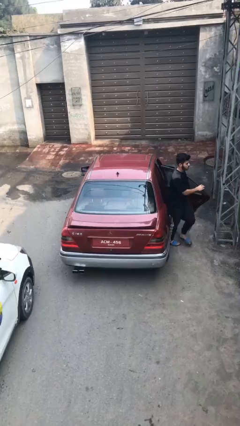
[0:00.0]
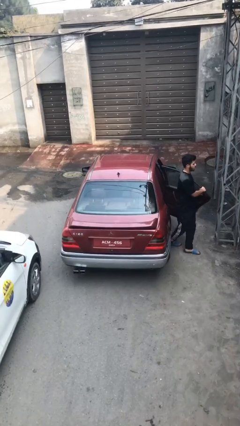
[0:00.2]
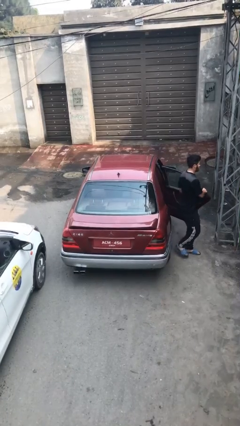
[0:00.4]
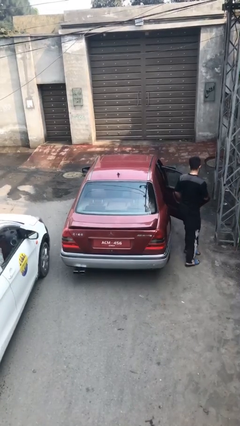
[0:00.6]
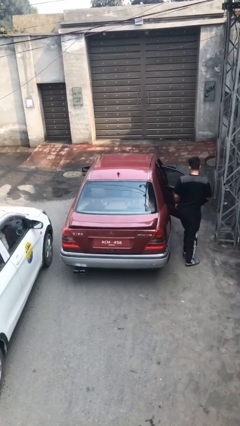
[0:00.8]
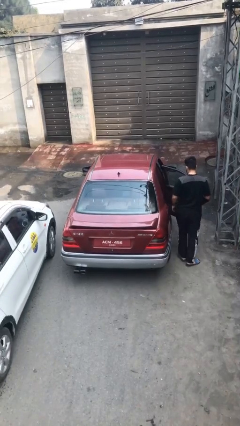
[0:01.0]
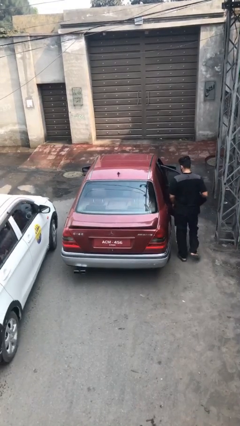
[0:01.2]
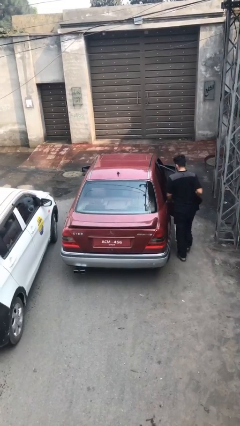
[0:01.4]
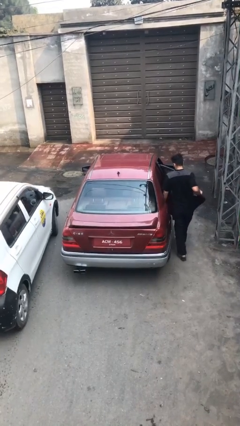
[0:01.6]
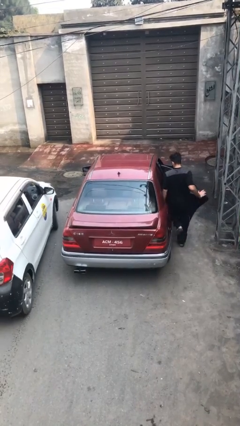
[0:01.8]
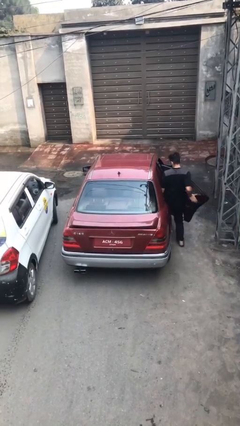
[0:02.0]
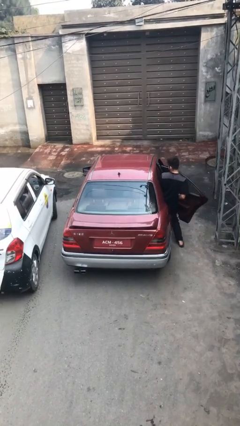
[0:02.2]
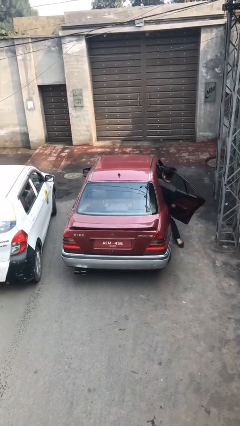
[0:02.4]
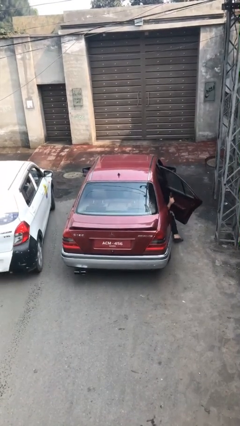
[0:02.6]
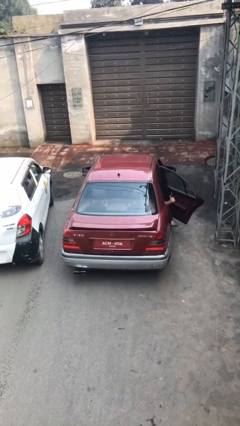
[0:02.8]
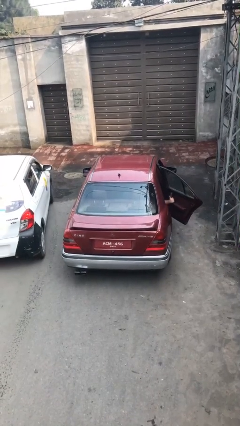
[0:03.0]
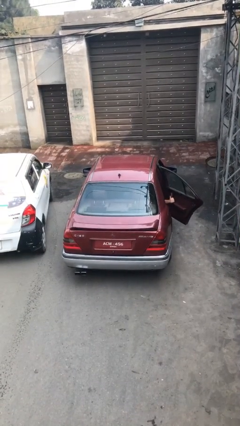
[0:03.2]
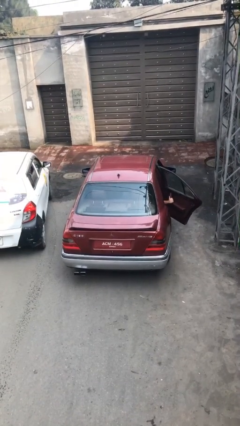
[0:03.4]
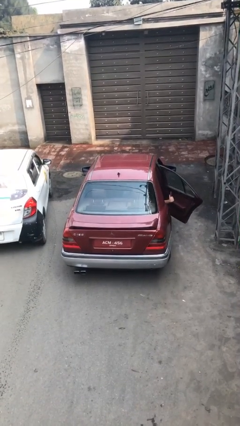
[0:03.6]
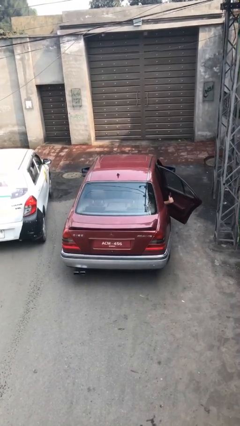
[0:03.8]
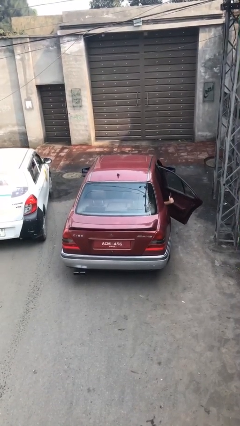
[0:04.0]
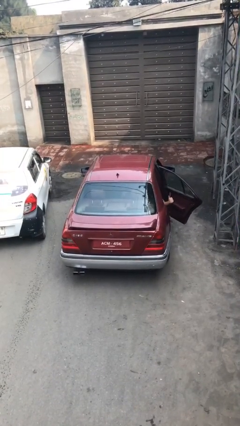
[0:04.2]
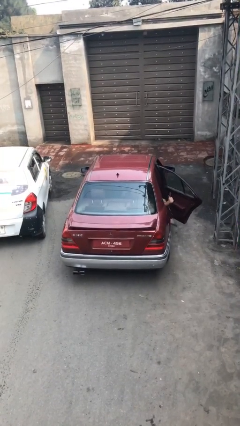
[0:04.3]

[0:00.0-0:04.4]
car picks up person

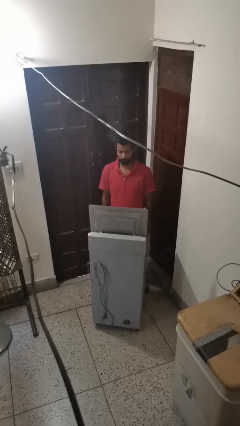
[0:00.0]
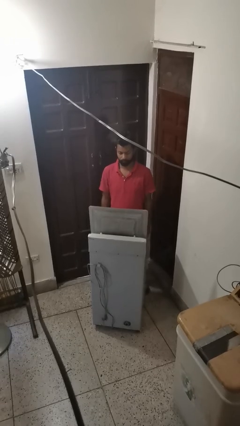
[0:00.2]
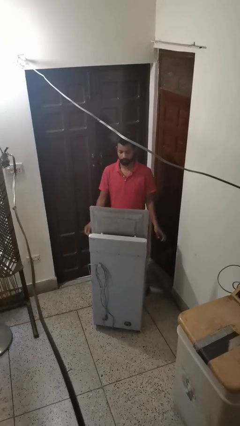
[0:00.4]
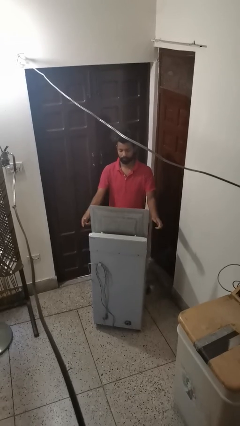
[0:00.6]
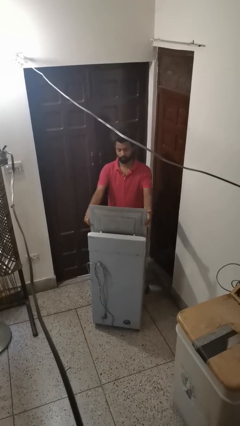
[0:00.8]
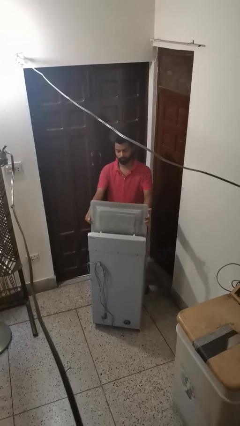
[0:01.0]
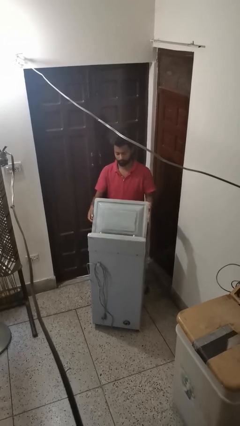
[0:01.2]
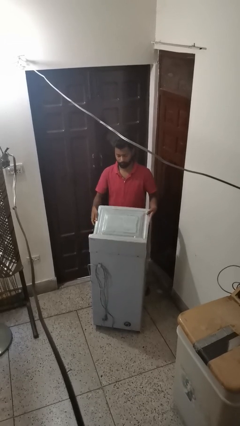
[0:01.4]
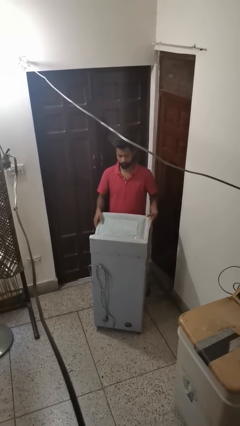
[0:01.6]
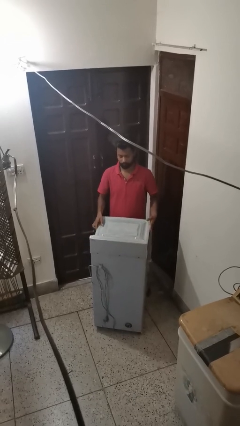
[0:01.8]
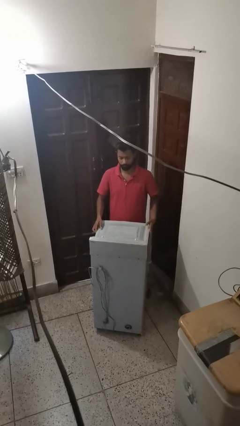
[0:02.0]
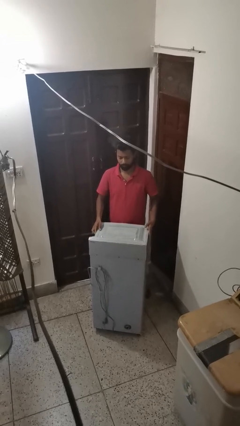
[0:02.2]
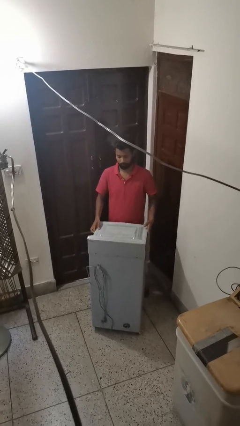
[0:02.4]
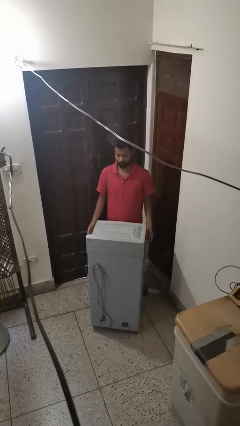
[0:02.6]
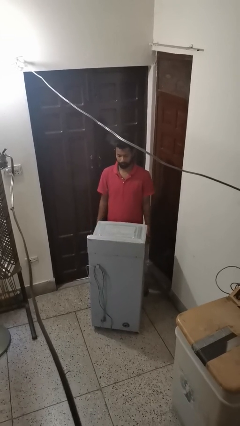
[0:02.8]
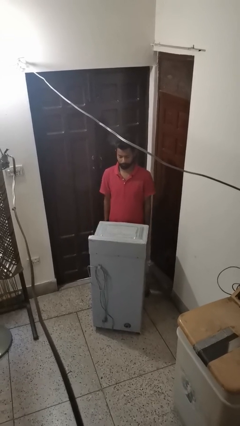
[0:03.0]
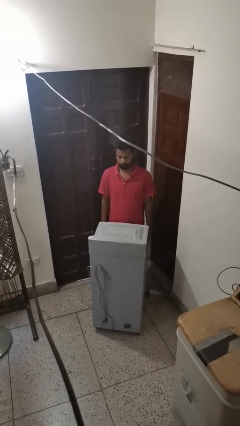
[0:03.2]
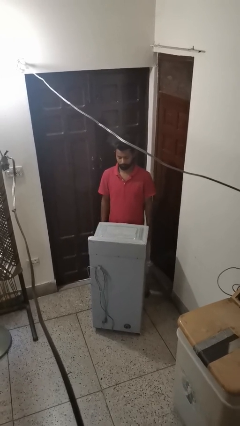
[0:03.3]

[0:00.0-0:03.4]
person closes clothes washer

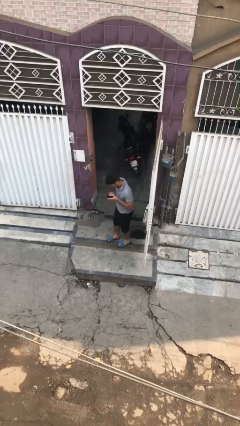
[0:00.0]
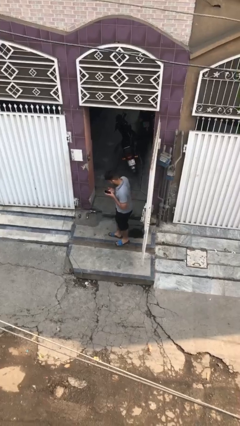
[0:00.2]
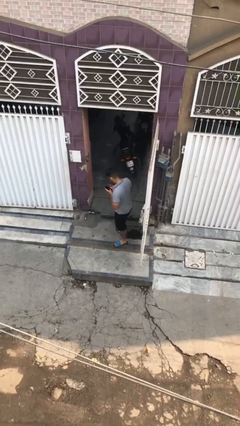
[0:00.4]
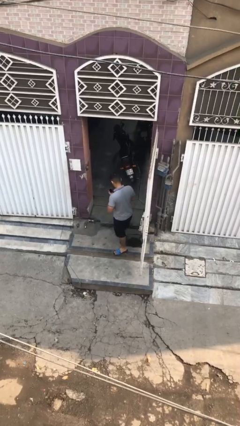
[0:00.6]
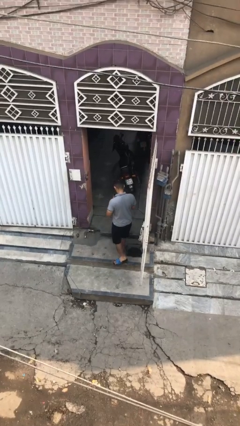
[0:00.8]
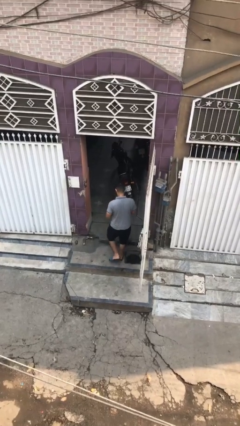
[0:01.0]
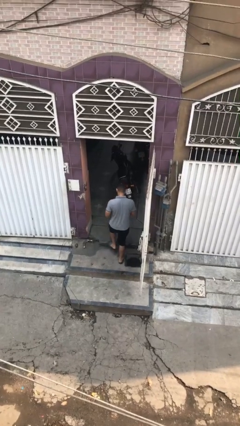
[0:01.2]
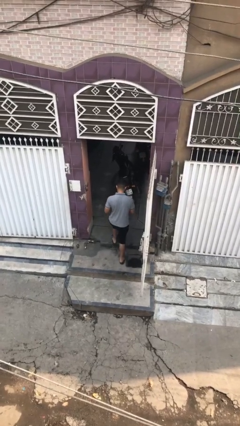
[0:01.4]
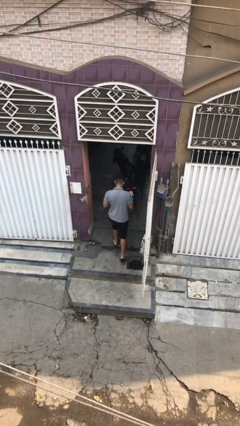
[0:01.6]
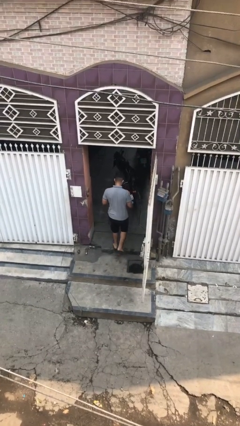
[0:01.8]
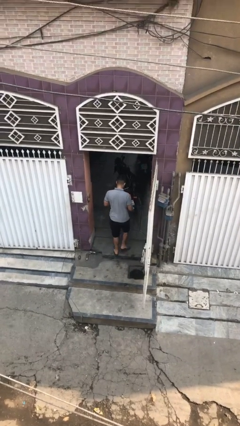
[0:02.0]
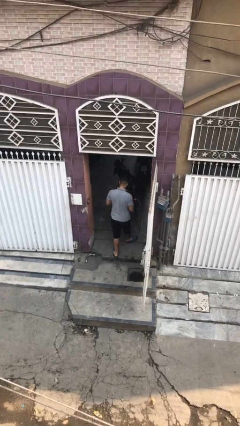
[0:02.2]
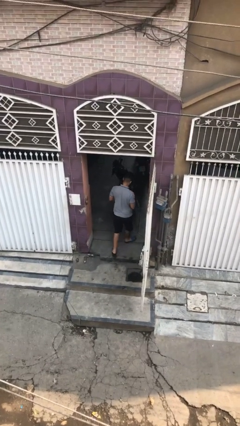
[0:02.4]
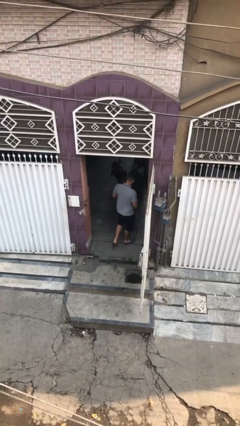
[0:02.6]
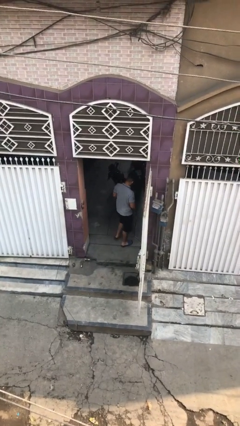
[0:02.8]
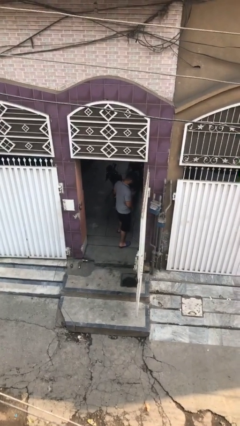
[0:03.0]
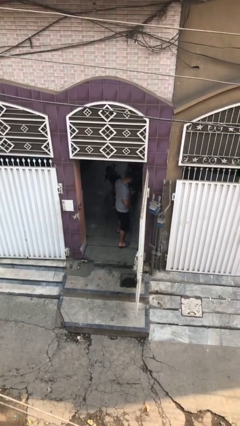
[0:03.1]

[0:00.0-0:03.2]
person exits scene through structure

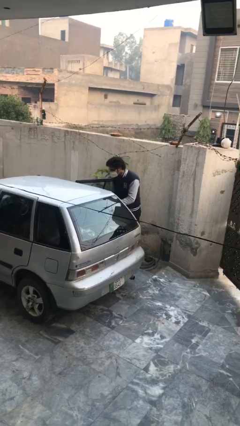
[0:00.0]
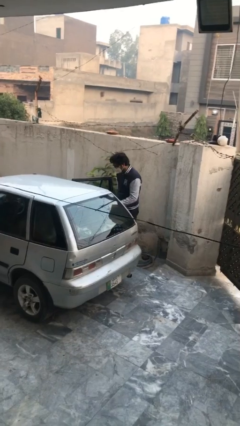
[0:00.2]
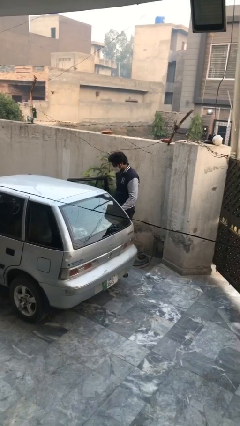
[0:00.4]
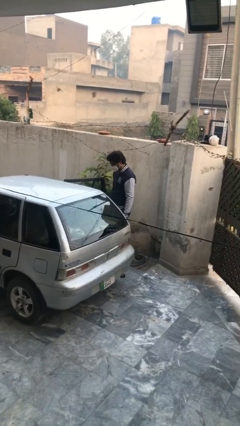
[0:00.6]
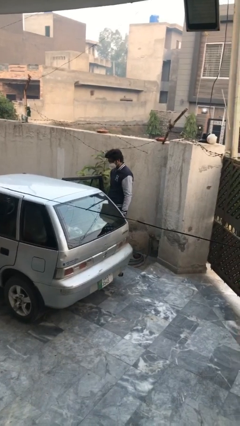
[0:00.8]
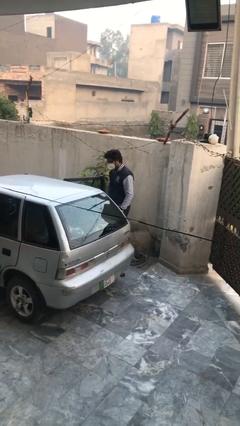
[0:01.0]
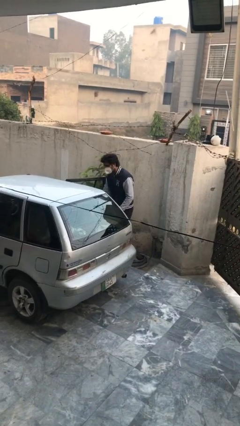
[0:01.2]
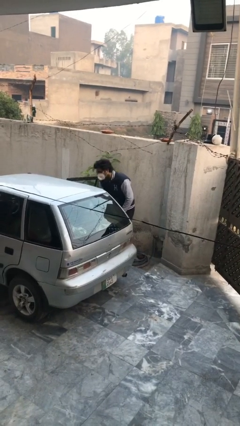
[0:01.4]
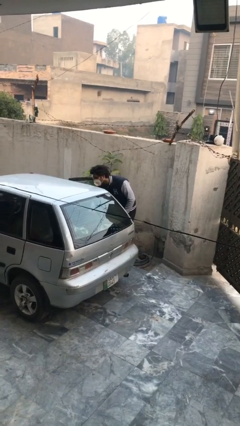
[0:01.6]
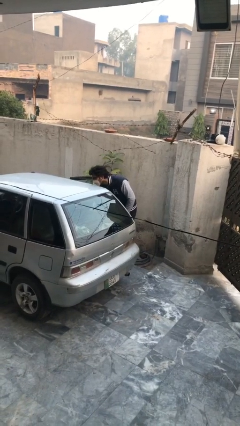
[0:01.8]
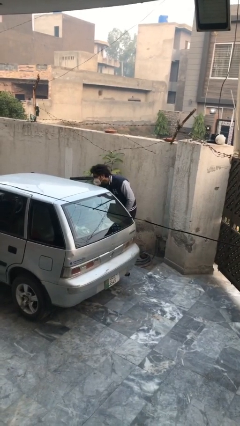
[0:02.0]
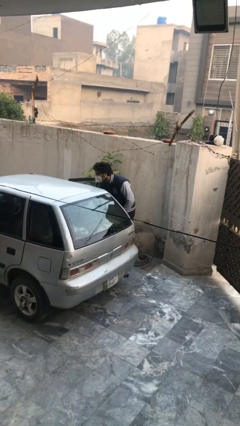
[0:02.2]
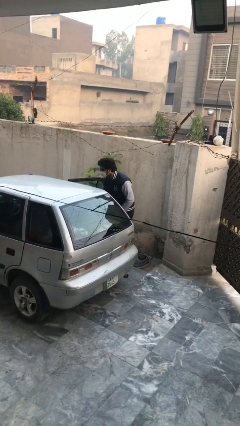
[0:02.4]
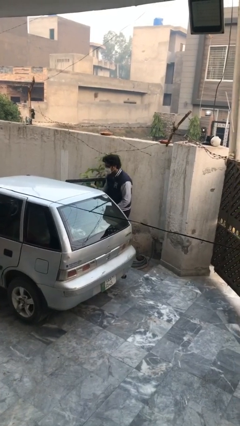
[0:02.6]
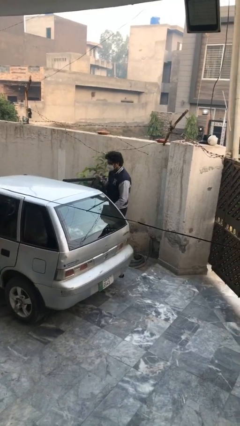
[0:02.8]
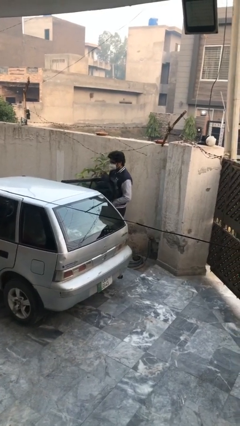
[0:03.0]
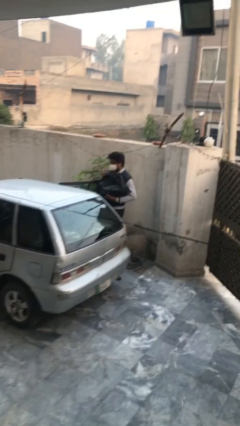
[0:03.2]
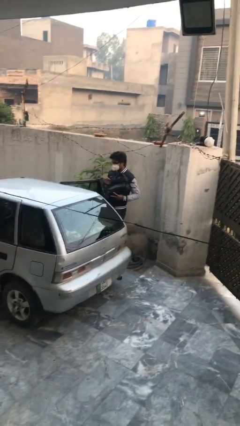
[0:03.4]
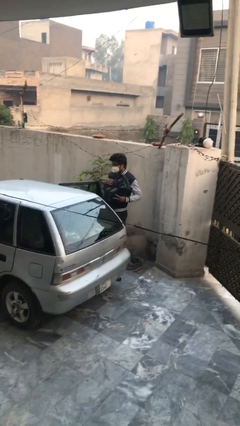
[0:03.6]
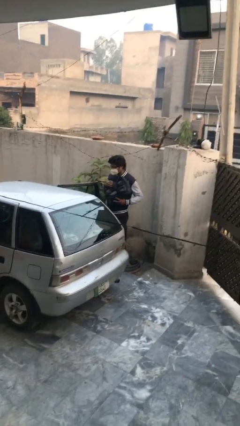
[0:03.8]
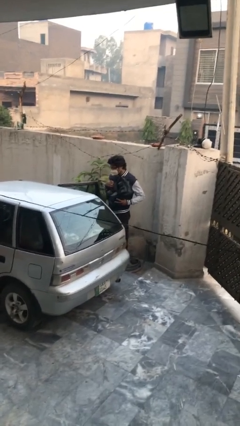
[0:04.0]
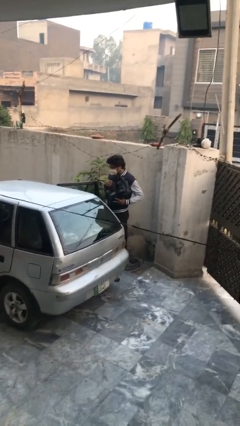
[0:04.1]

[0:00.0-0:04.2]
person unloads car

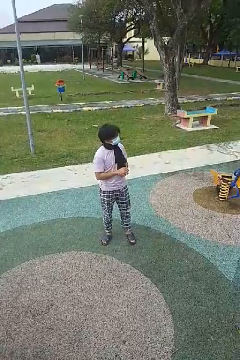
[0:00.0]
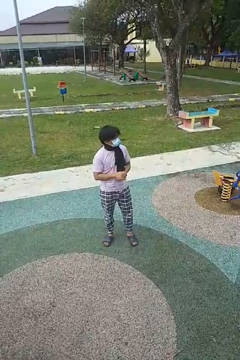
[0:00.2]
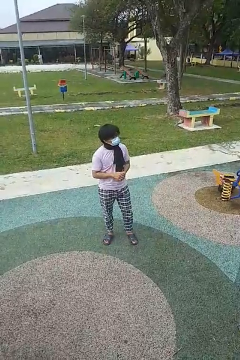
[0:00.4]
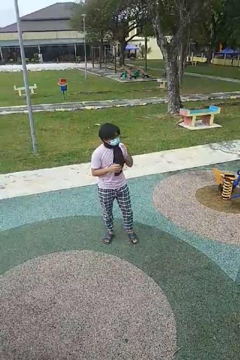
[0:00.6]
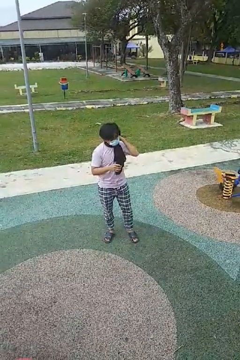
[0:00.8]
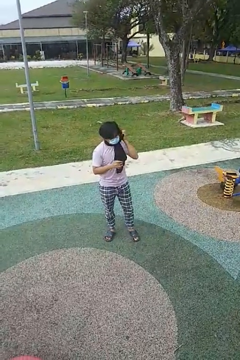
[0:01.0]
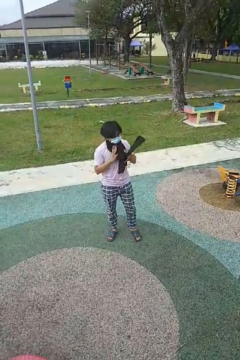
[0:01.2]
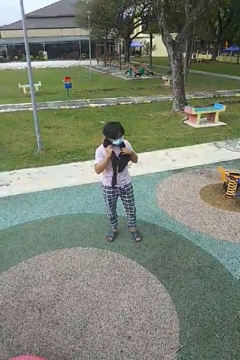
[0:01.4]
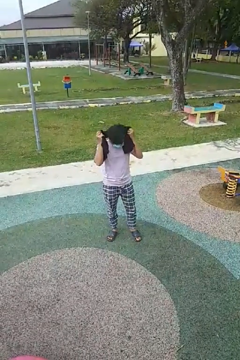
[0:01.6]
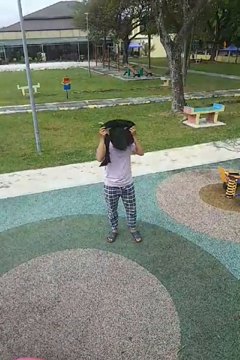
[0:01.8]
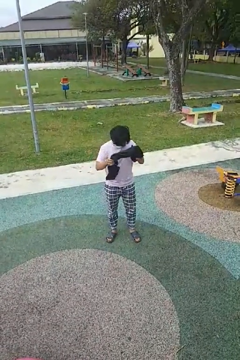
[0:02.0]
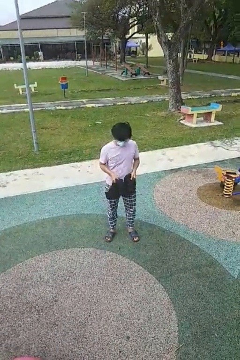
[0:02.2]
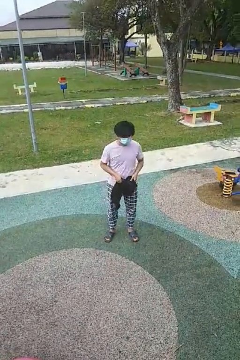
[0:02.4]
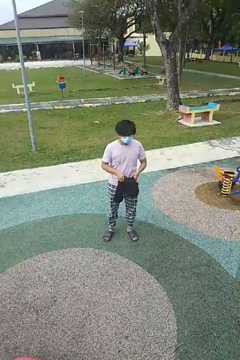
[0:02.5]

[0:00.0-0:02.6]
person takes off scarf

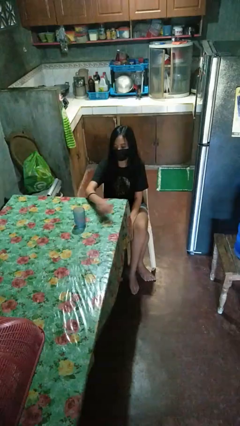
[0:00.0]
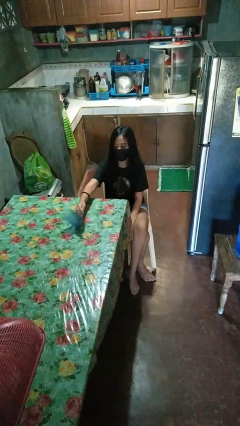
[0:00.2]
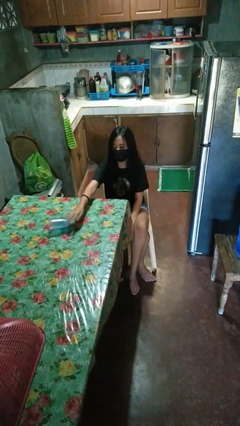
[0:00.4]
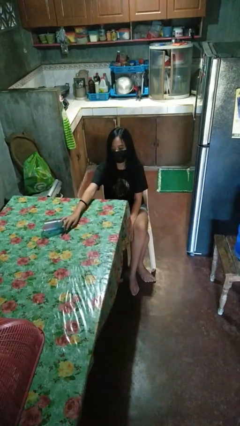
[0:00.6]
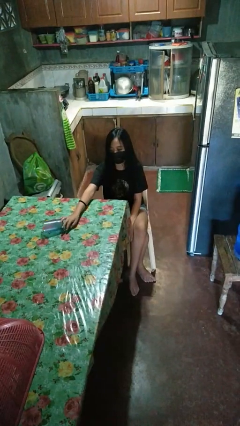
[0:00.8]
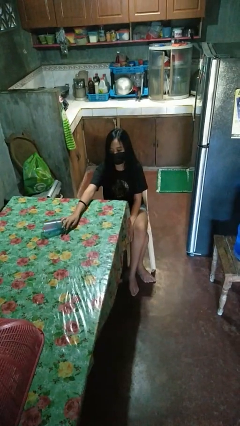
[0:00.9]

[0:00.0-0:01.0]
person knocks over glass
